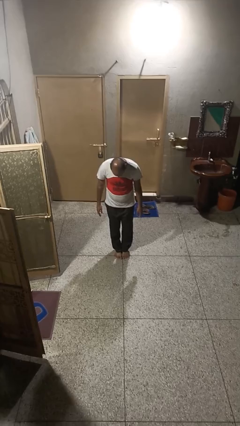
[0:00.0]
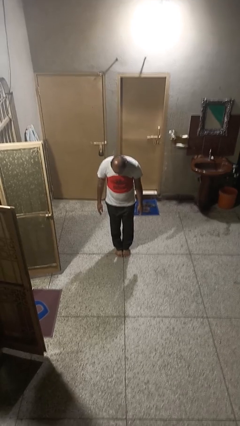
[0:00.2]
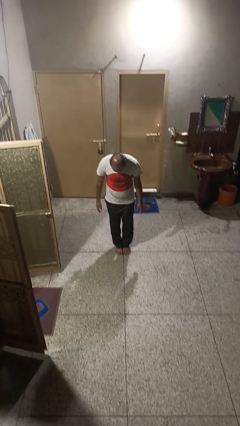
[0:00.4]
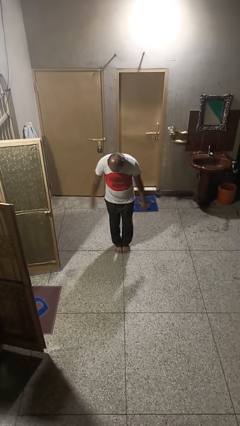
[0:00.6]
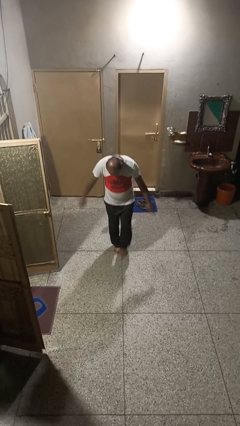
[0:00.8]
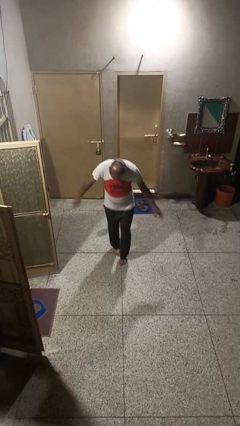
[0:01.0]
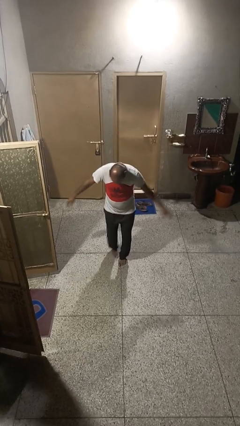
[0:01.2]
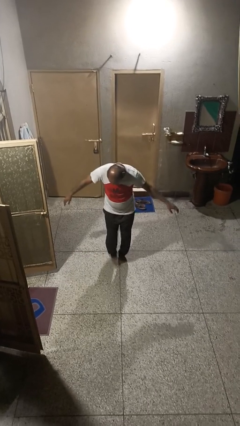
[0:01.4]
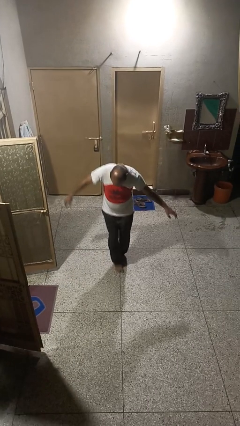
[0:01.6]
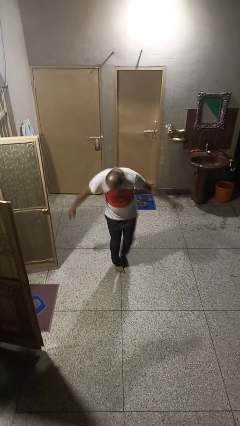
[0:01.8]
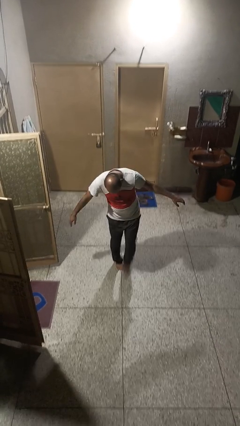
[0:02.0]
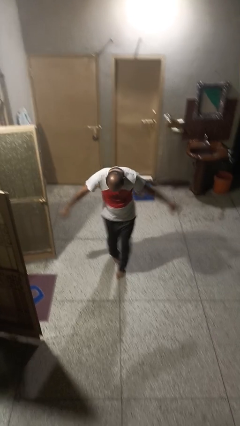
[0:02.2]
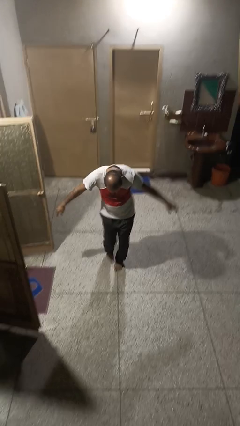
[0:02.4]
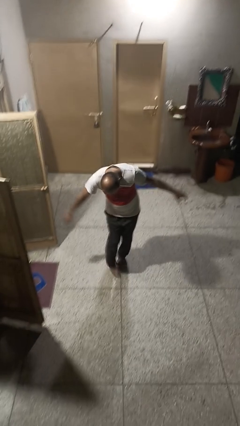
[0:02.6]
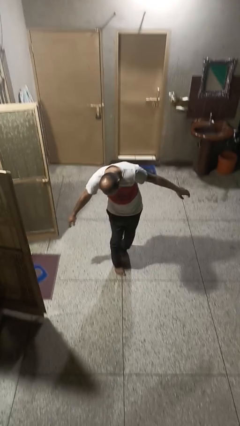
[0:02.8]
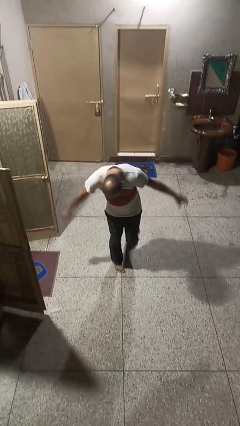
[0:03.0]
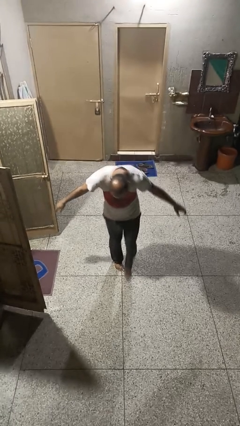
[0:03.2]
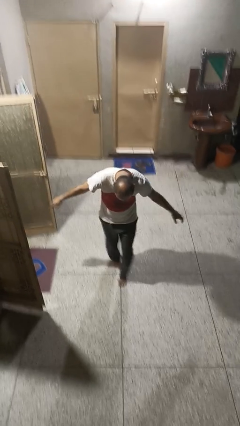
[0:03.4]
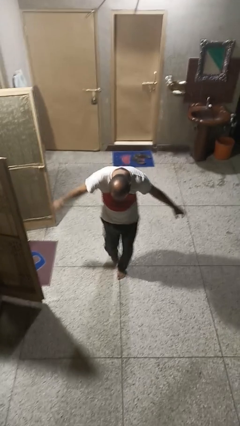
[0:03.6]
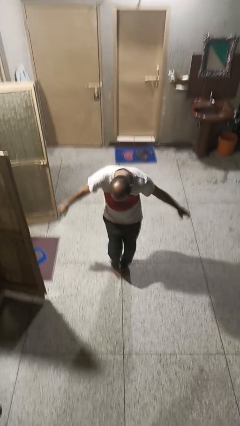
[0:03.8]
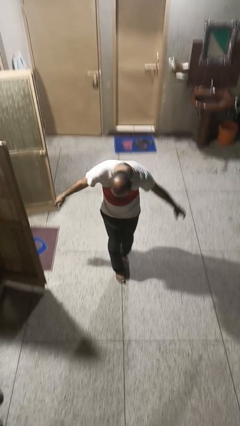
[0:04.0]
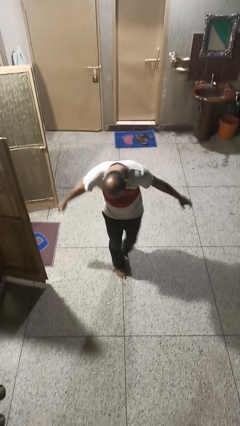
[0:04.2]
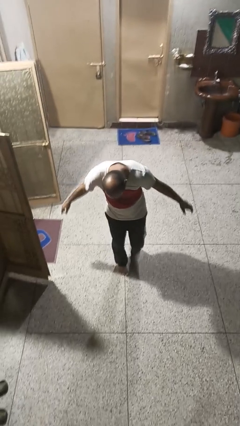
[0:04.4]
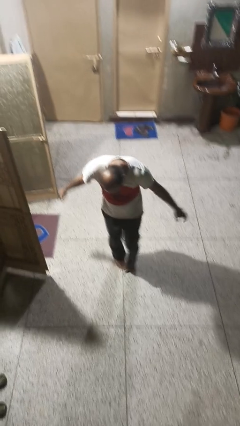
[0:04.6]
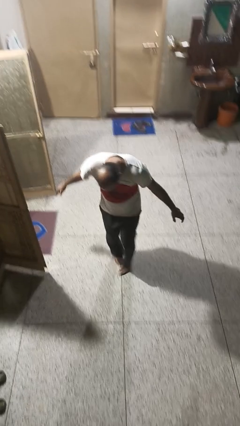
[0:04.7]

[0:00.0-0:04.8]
person walks tiptoe

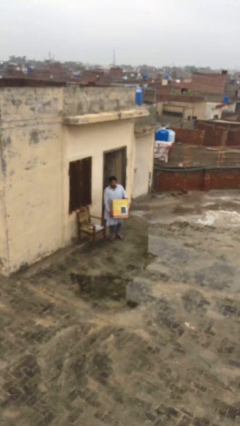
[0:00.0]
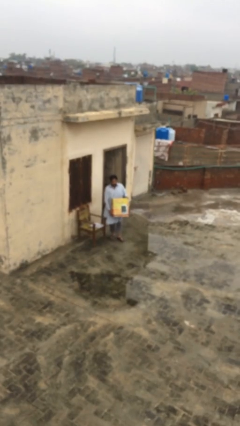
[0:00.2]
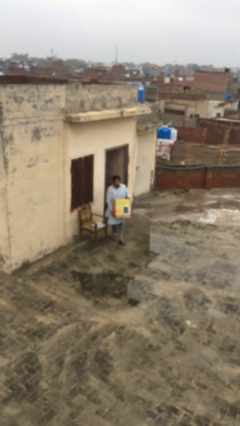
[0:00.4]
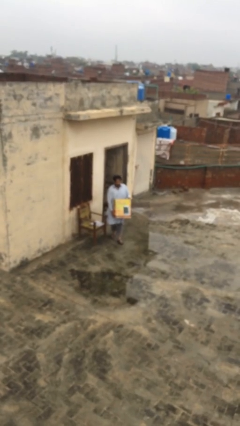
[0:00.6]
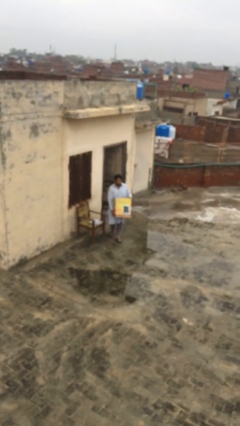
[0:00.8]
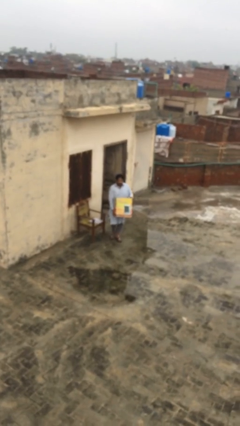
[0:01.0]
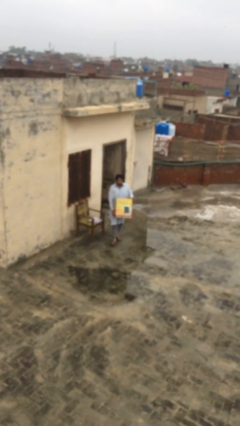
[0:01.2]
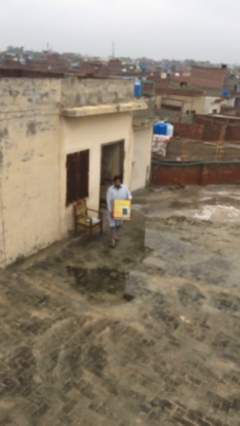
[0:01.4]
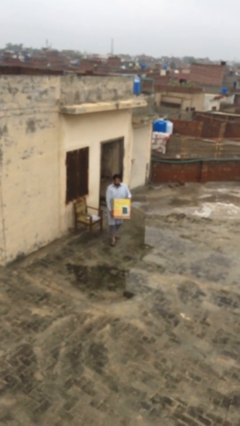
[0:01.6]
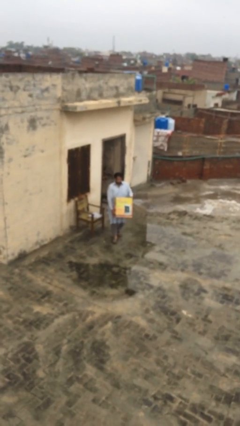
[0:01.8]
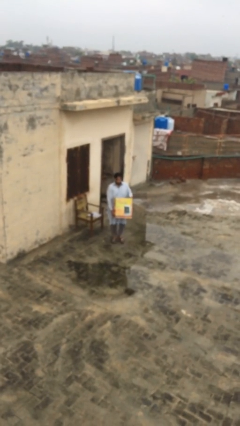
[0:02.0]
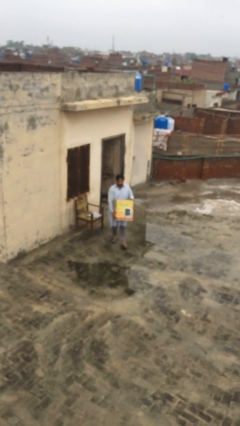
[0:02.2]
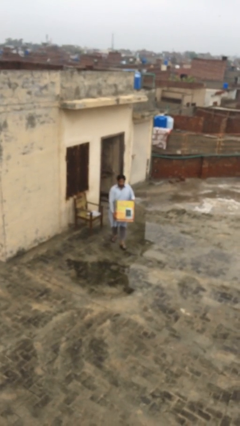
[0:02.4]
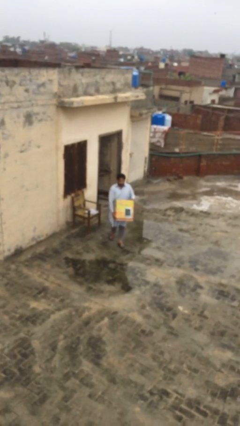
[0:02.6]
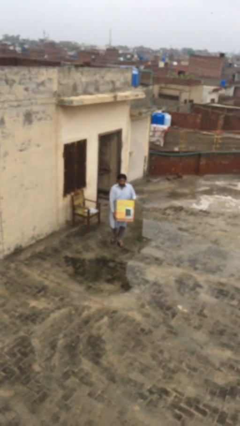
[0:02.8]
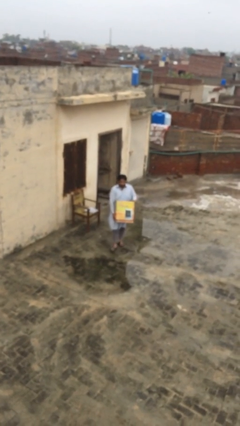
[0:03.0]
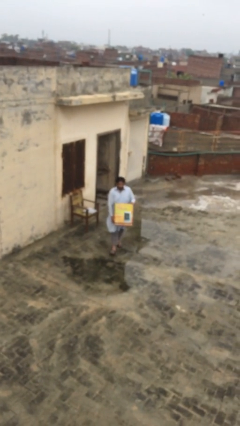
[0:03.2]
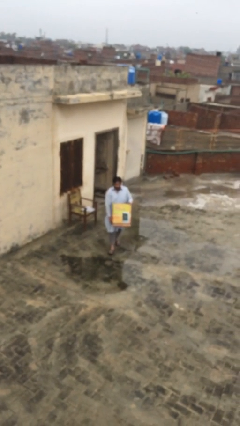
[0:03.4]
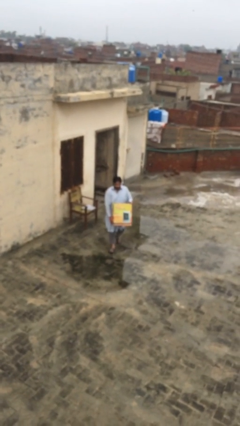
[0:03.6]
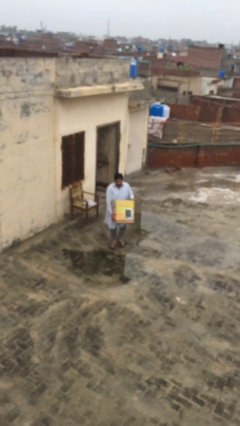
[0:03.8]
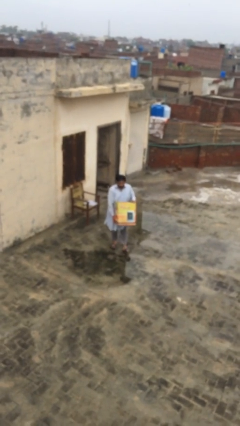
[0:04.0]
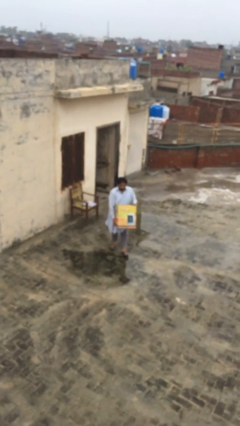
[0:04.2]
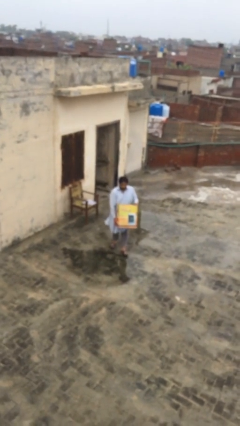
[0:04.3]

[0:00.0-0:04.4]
person carries heavy object

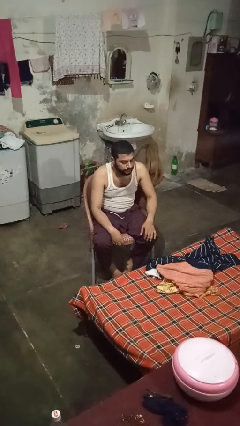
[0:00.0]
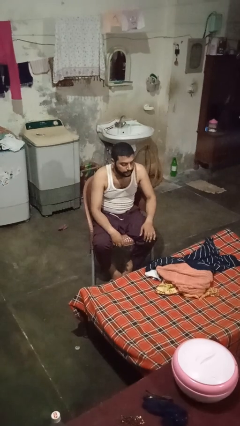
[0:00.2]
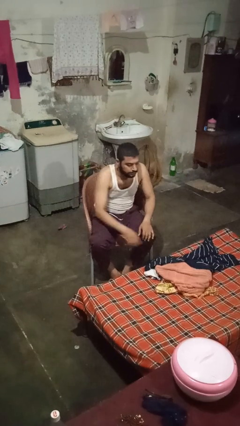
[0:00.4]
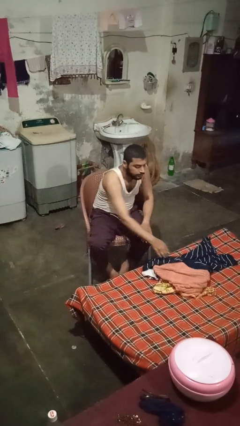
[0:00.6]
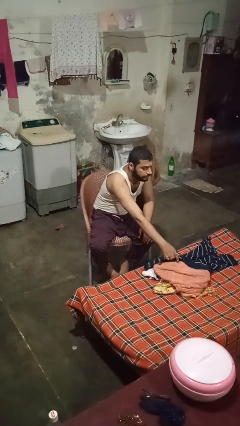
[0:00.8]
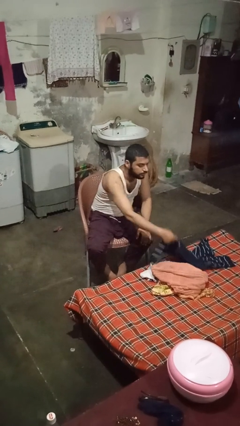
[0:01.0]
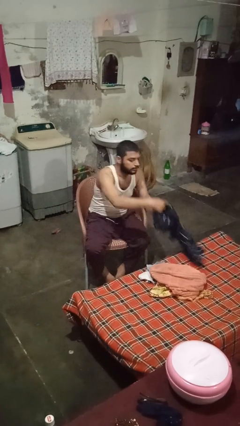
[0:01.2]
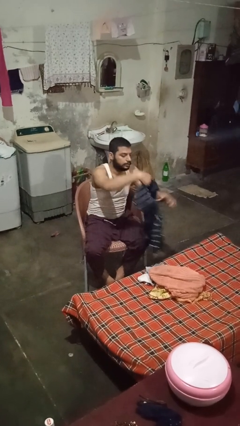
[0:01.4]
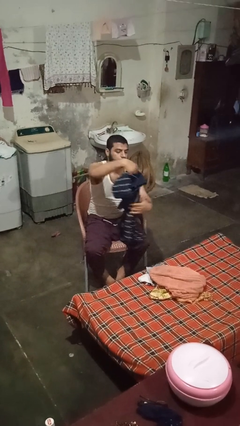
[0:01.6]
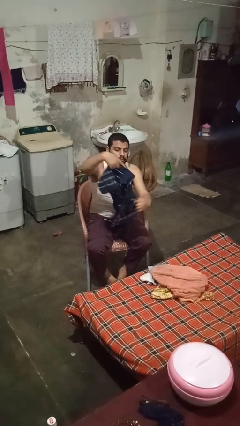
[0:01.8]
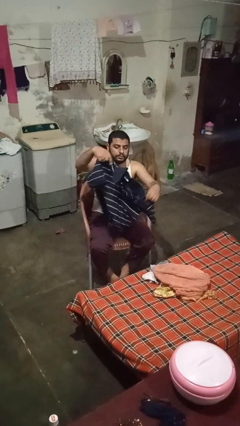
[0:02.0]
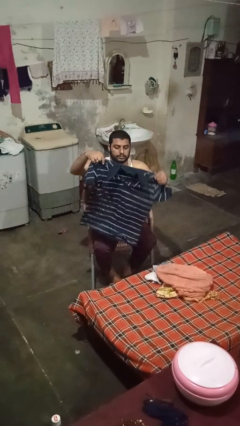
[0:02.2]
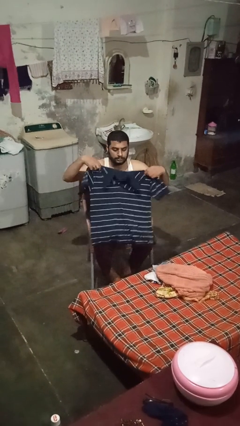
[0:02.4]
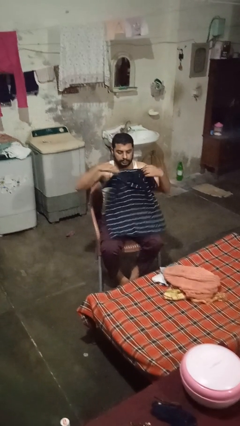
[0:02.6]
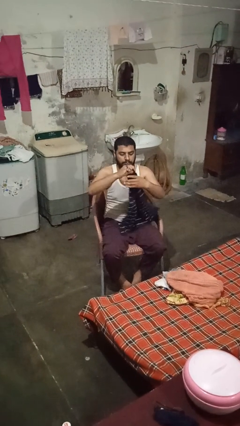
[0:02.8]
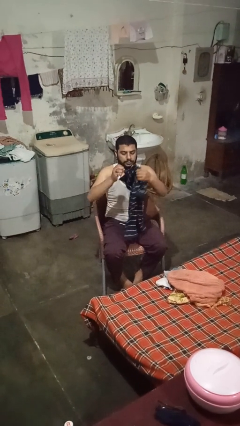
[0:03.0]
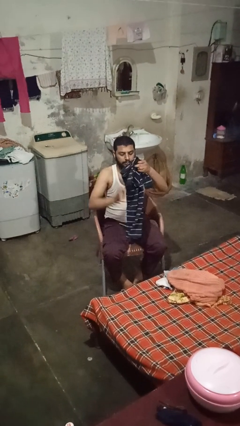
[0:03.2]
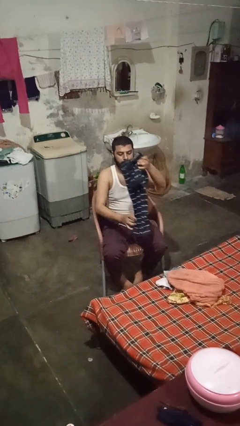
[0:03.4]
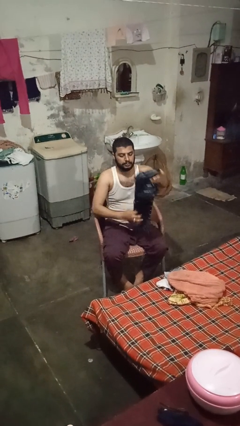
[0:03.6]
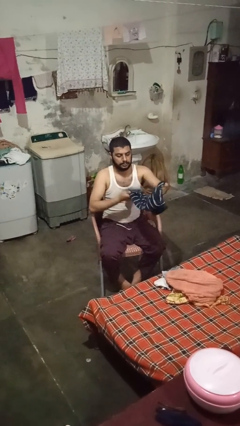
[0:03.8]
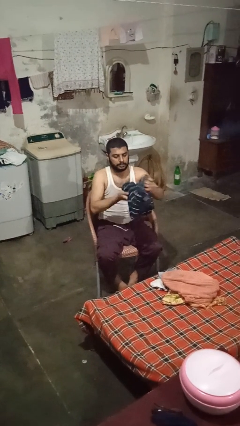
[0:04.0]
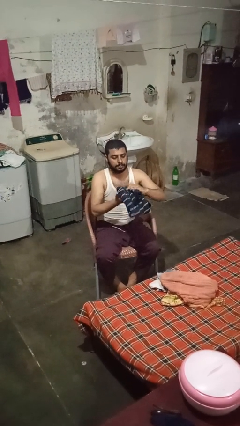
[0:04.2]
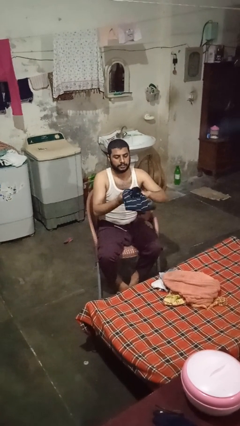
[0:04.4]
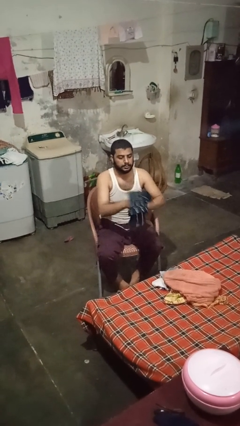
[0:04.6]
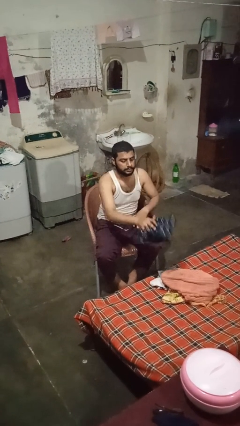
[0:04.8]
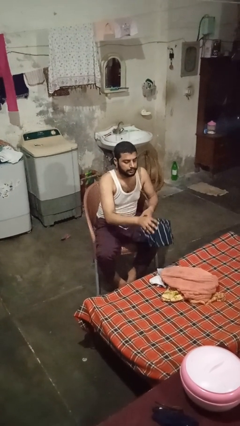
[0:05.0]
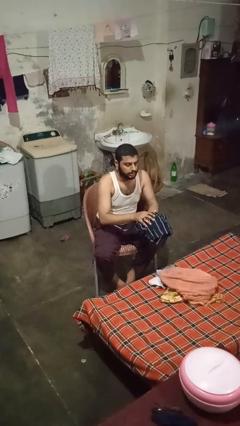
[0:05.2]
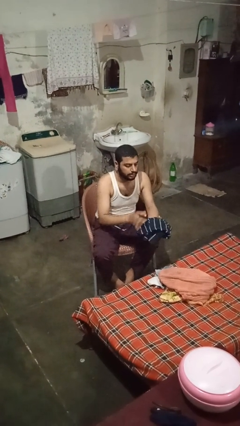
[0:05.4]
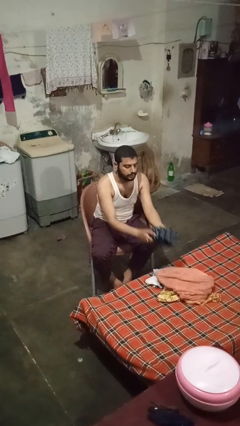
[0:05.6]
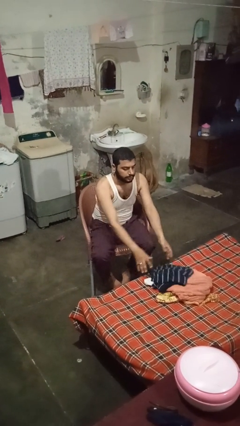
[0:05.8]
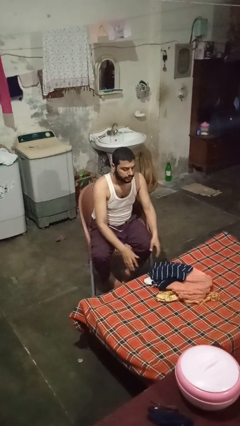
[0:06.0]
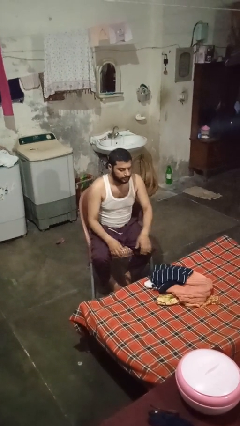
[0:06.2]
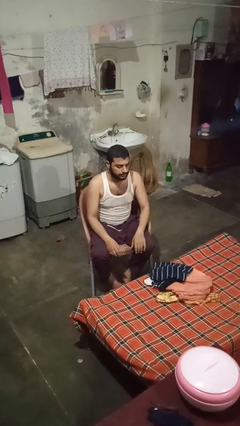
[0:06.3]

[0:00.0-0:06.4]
person folds shirt

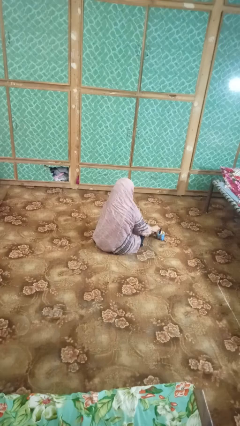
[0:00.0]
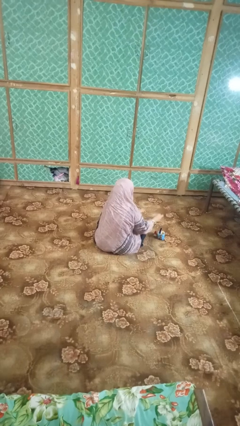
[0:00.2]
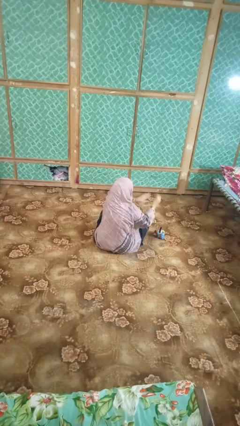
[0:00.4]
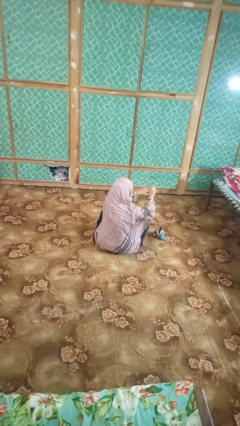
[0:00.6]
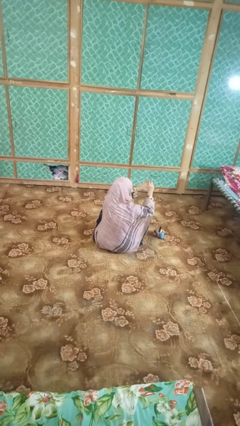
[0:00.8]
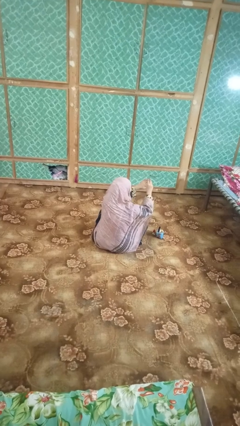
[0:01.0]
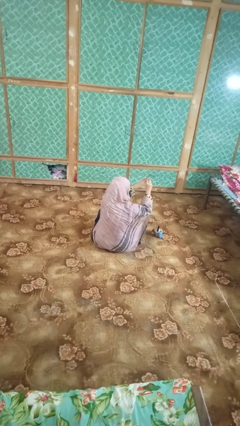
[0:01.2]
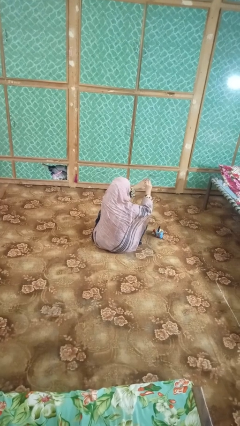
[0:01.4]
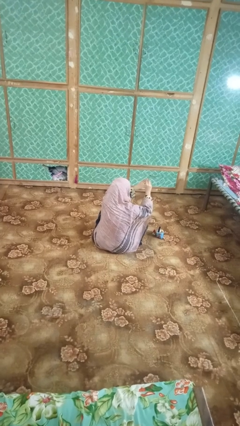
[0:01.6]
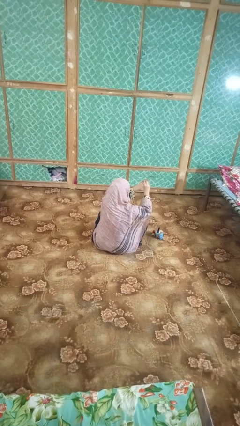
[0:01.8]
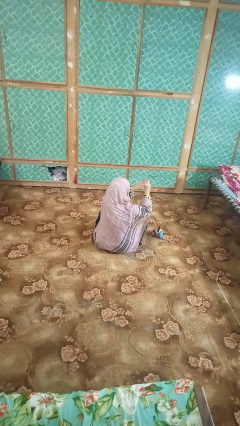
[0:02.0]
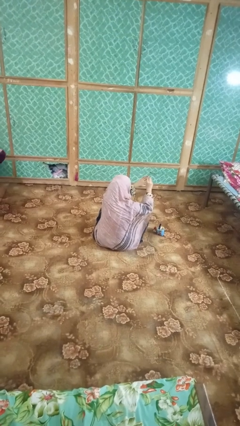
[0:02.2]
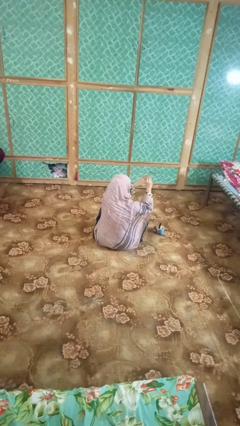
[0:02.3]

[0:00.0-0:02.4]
person paints fingernails
